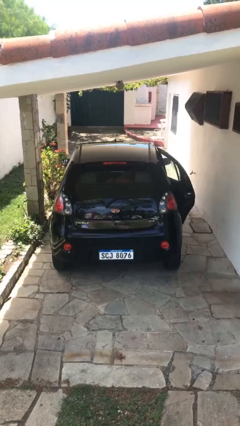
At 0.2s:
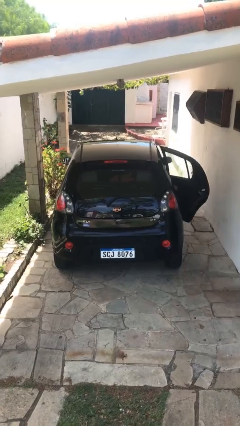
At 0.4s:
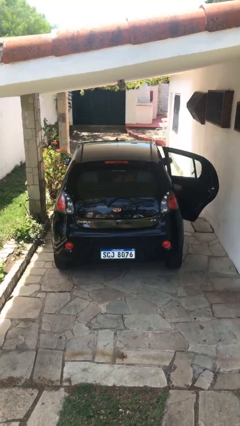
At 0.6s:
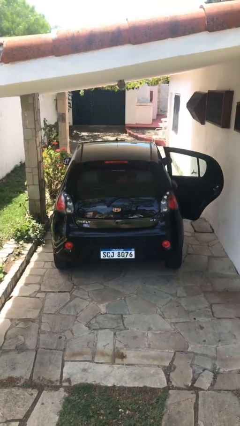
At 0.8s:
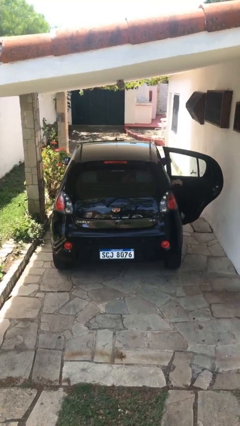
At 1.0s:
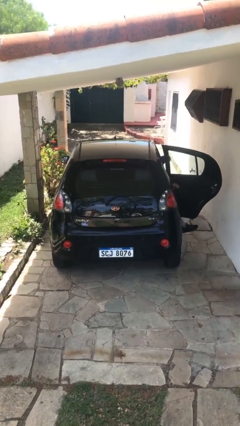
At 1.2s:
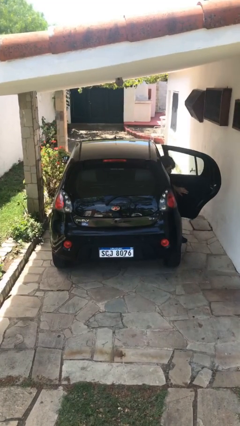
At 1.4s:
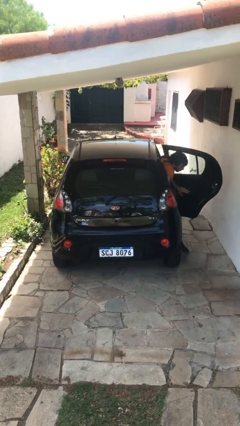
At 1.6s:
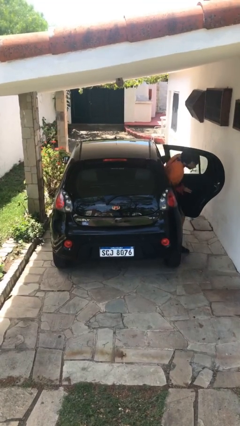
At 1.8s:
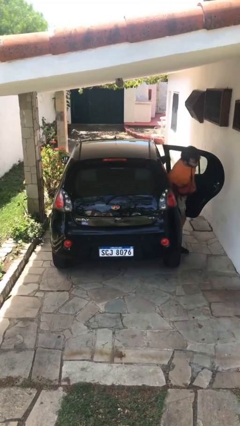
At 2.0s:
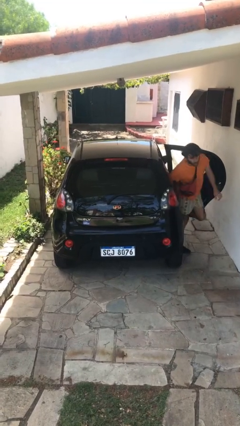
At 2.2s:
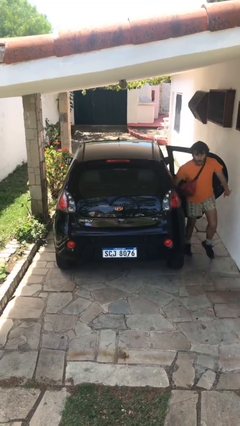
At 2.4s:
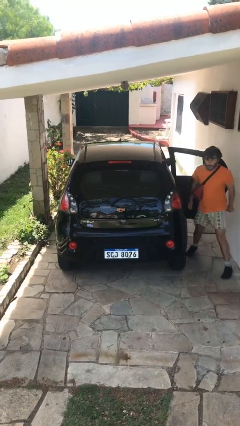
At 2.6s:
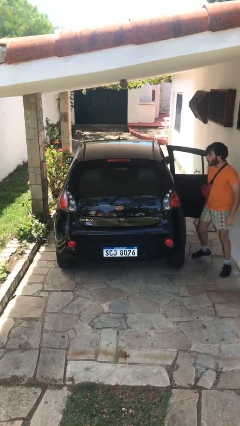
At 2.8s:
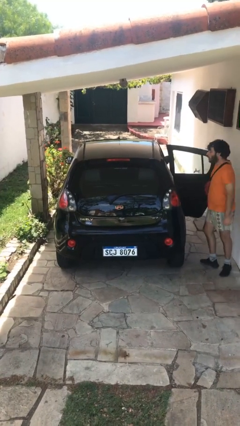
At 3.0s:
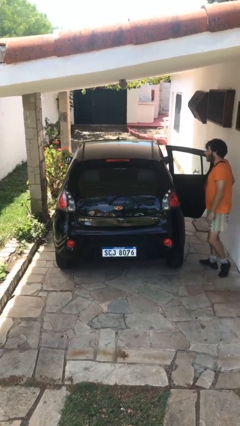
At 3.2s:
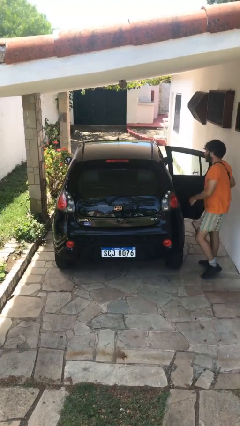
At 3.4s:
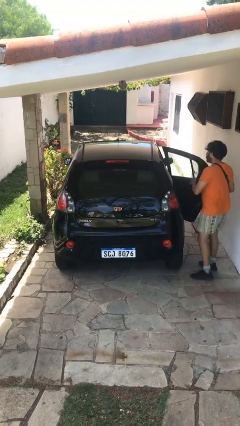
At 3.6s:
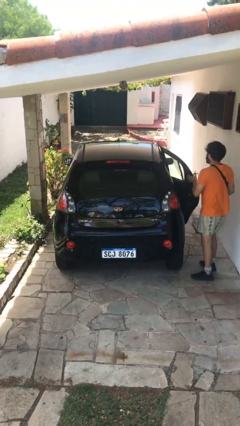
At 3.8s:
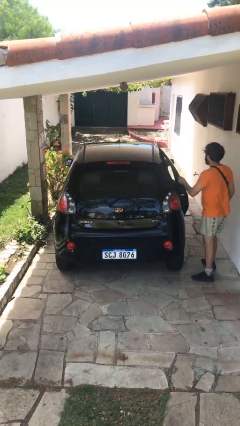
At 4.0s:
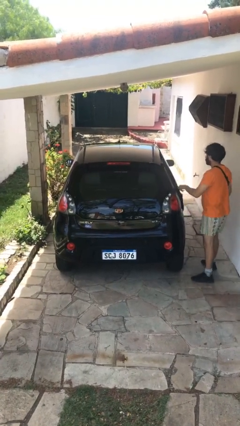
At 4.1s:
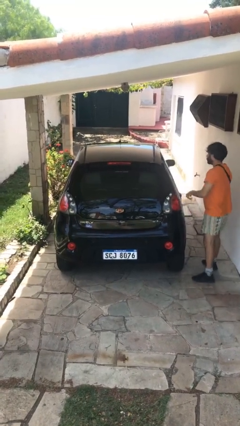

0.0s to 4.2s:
car drops off person

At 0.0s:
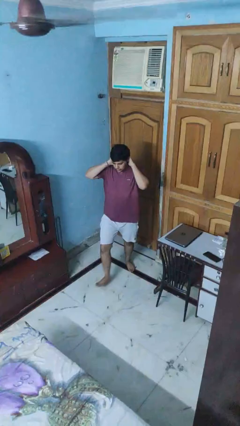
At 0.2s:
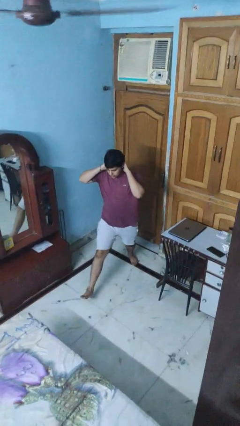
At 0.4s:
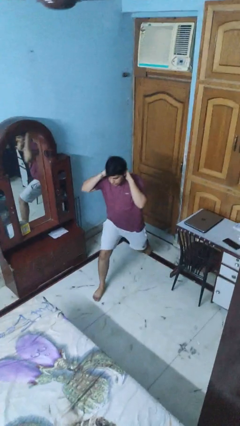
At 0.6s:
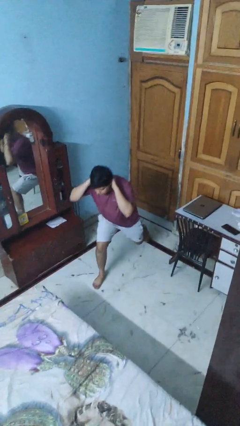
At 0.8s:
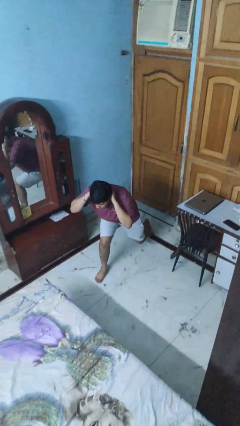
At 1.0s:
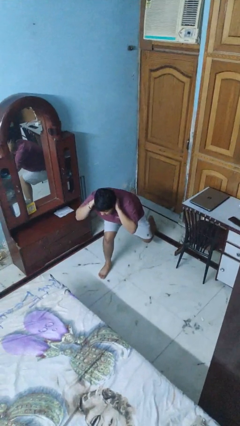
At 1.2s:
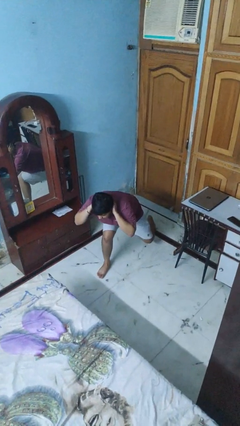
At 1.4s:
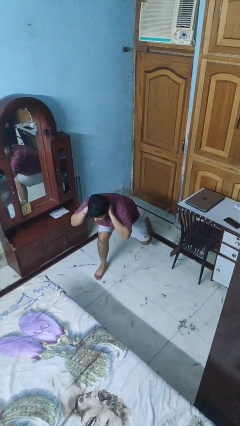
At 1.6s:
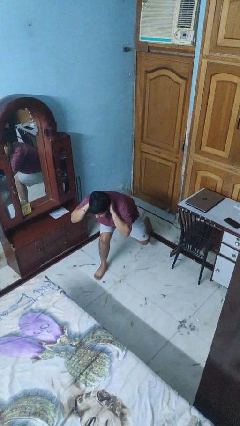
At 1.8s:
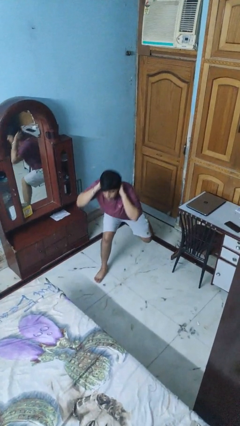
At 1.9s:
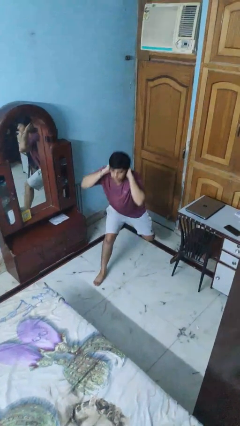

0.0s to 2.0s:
person exercises with lunges

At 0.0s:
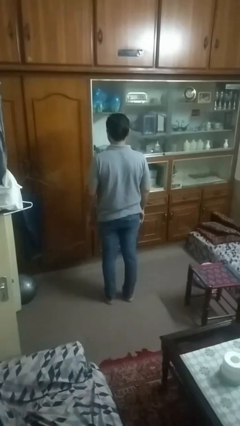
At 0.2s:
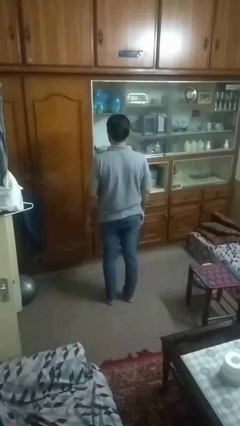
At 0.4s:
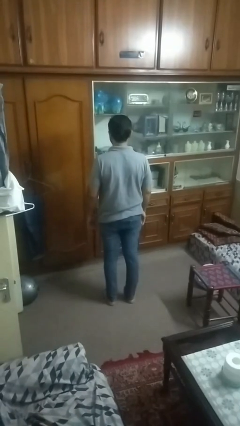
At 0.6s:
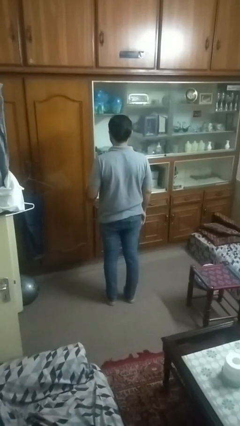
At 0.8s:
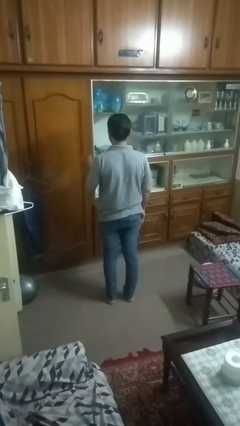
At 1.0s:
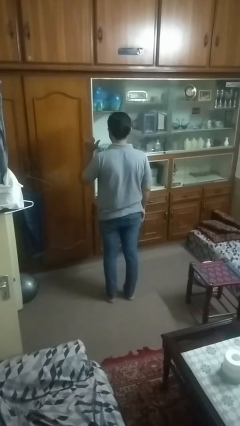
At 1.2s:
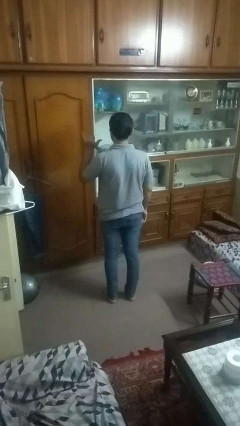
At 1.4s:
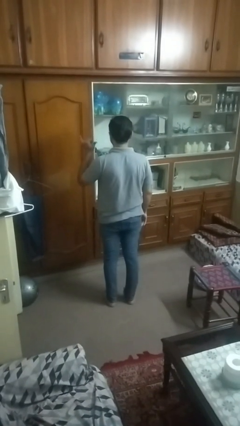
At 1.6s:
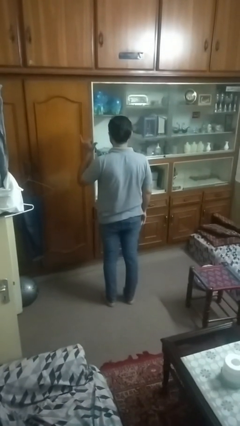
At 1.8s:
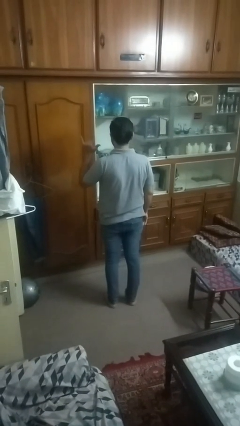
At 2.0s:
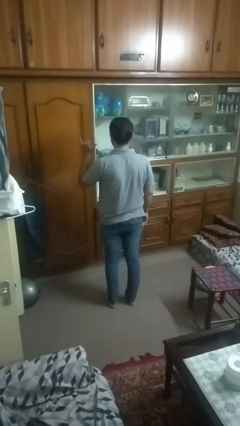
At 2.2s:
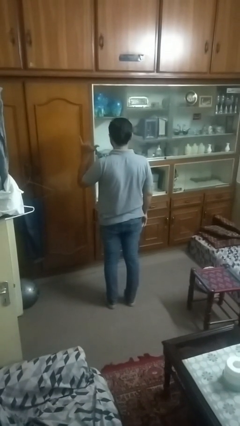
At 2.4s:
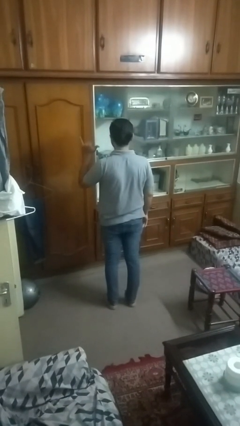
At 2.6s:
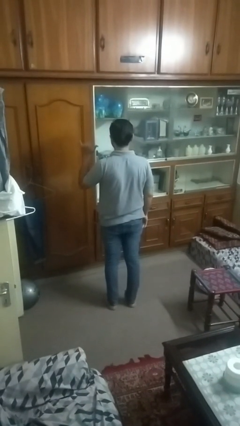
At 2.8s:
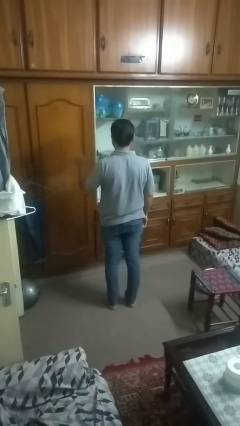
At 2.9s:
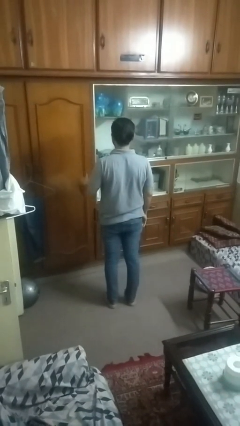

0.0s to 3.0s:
person gestures hang loose

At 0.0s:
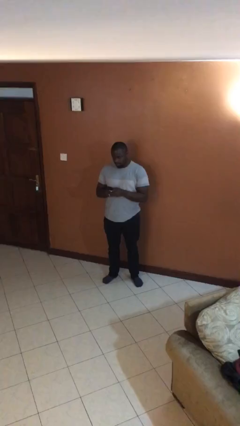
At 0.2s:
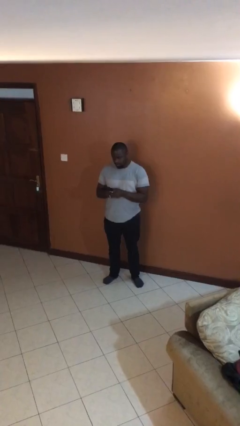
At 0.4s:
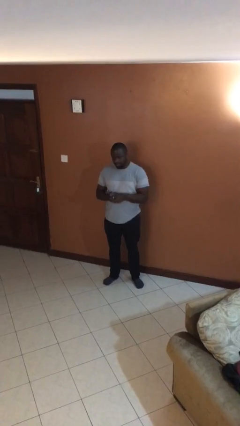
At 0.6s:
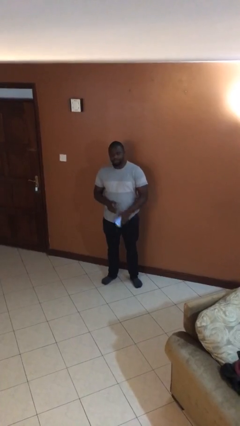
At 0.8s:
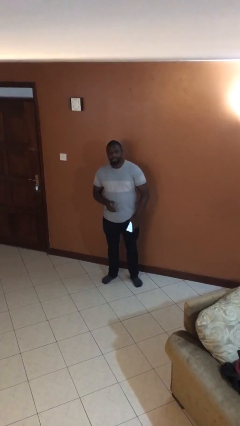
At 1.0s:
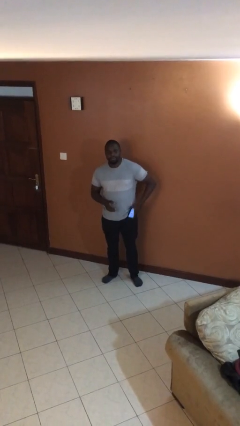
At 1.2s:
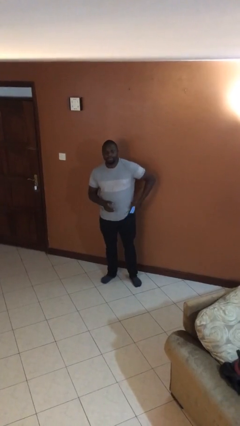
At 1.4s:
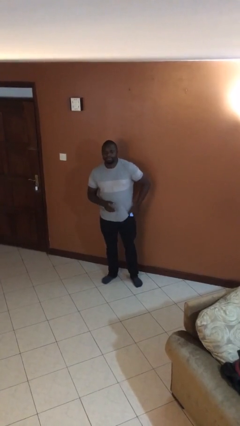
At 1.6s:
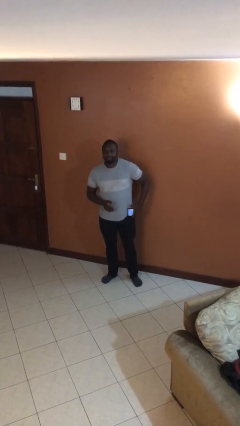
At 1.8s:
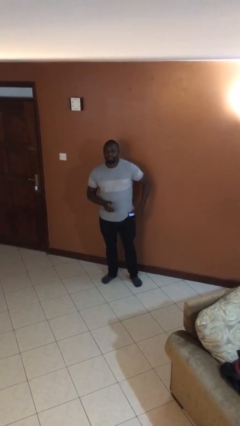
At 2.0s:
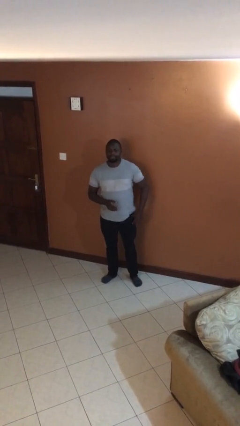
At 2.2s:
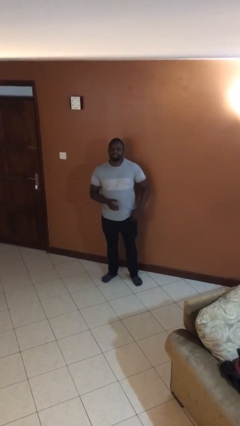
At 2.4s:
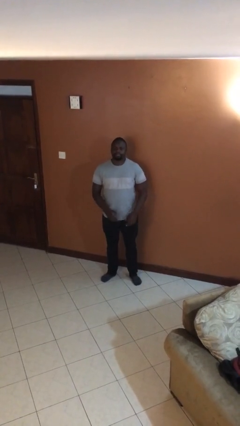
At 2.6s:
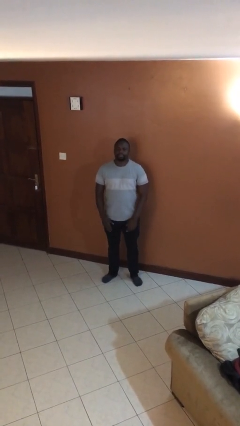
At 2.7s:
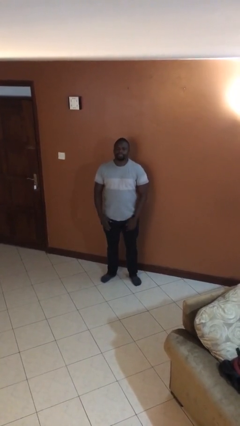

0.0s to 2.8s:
person puts phone into pocket

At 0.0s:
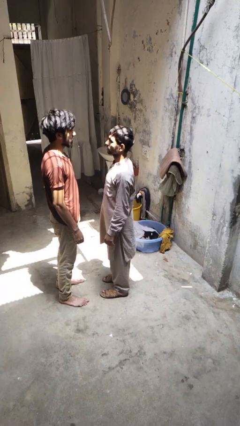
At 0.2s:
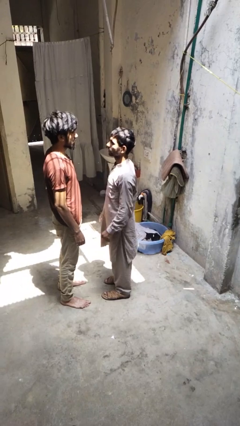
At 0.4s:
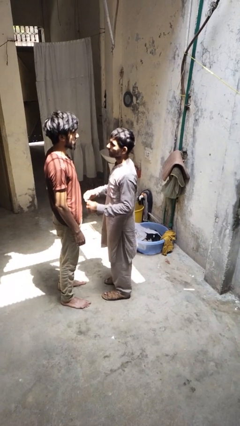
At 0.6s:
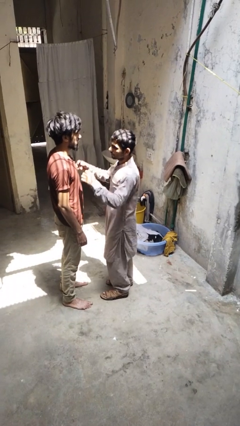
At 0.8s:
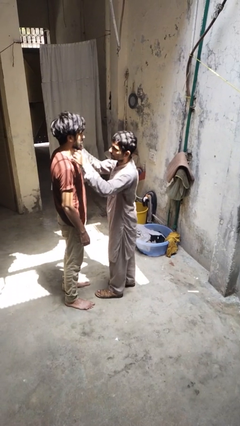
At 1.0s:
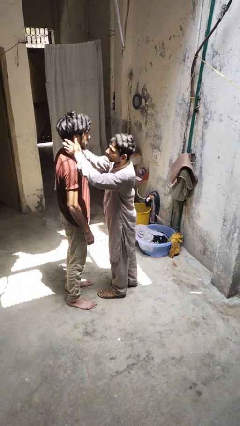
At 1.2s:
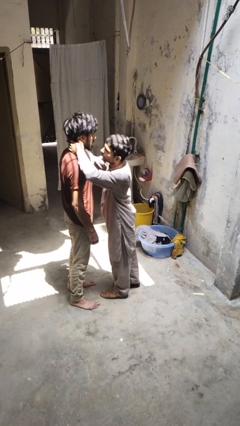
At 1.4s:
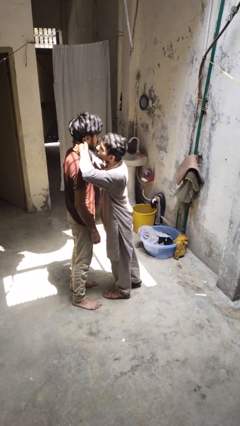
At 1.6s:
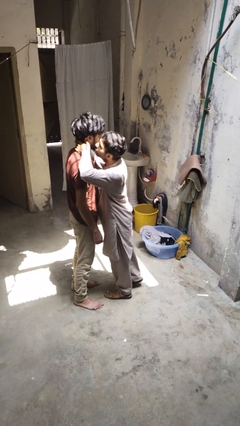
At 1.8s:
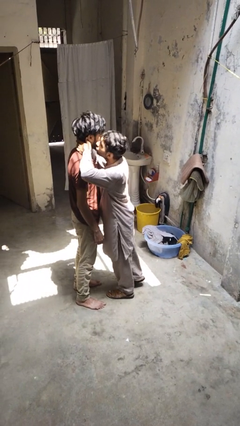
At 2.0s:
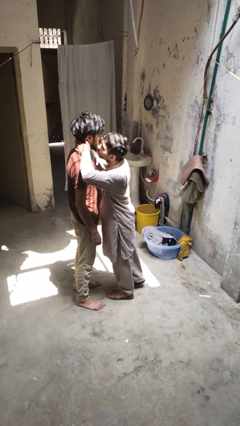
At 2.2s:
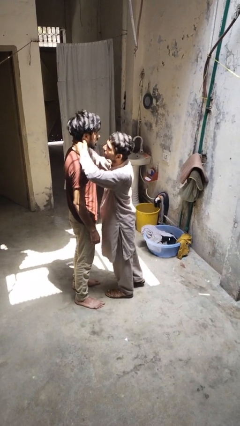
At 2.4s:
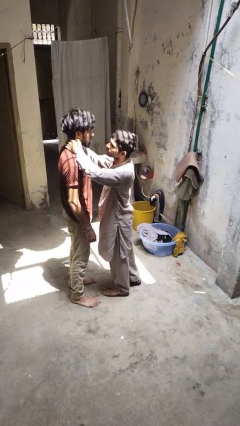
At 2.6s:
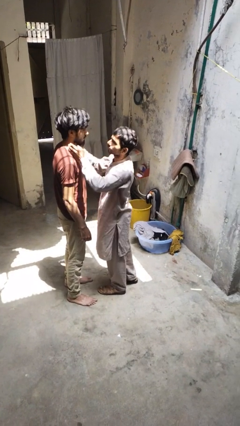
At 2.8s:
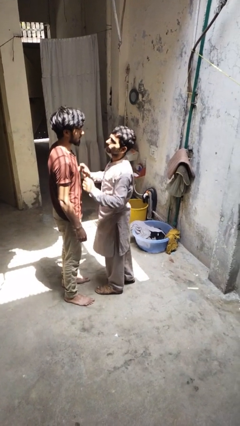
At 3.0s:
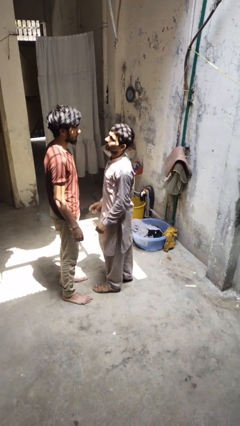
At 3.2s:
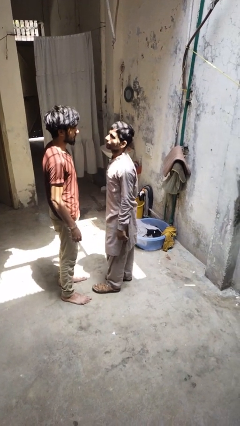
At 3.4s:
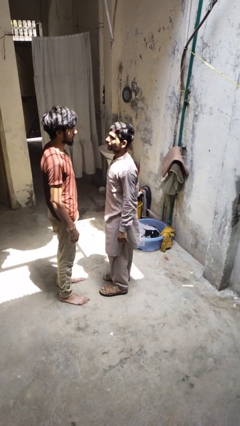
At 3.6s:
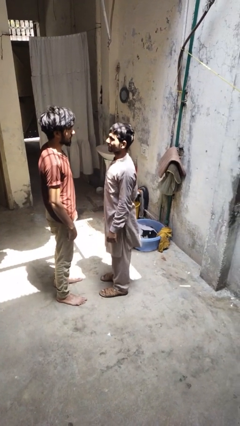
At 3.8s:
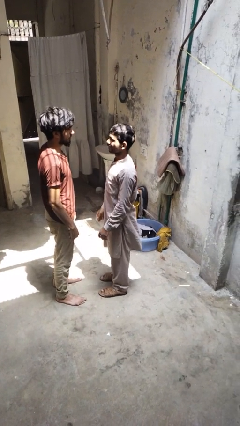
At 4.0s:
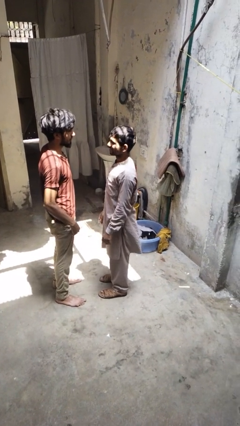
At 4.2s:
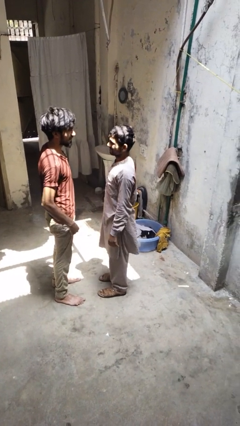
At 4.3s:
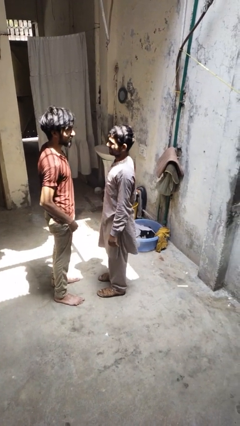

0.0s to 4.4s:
person kisses cheek of person

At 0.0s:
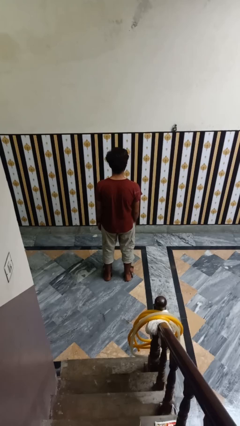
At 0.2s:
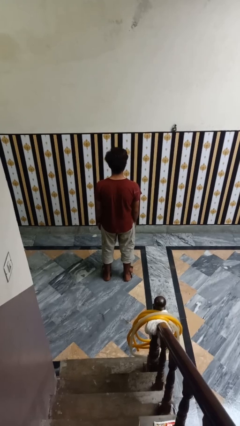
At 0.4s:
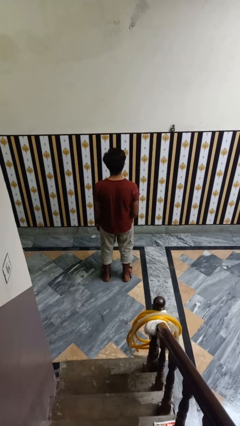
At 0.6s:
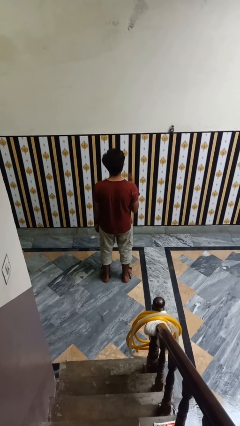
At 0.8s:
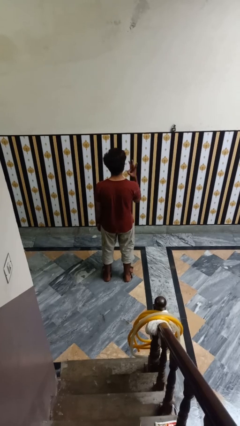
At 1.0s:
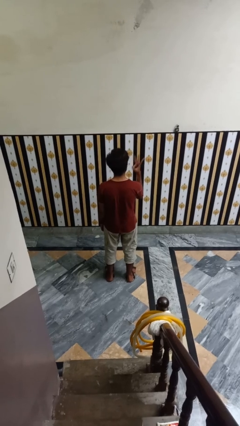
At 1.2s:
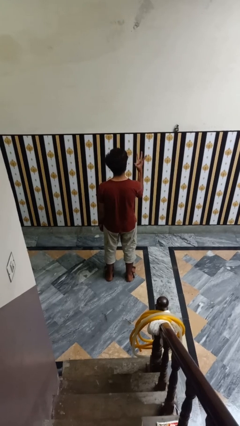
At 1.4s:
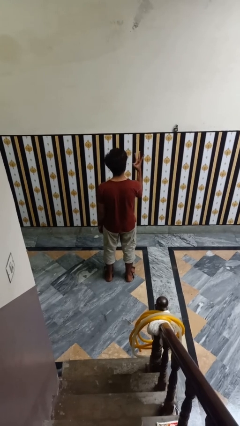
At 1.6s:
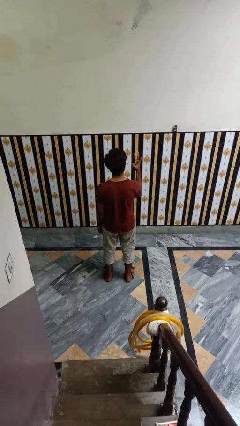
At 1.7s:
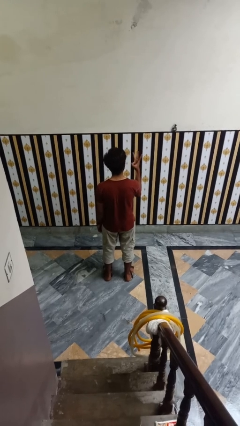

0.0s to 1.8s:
person gestures number three
